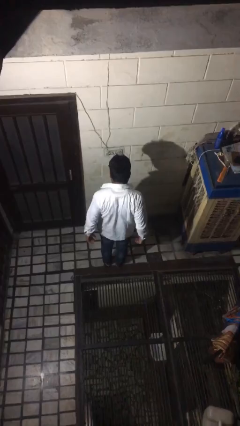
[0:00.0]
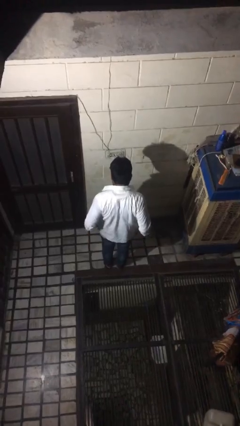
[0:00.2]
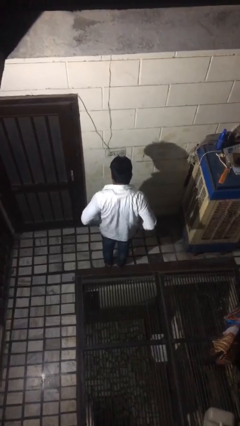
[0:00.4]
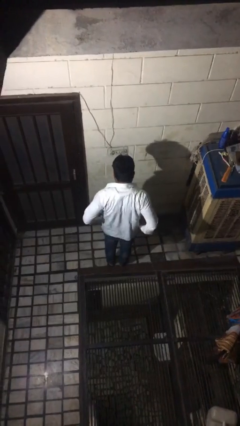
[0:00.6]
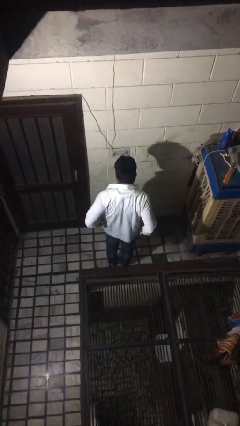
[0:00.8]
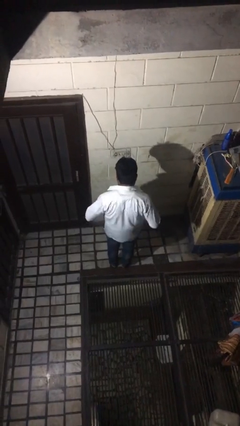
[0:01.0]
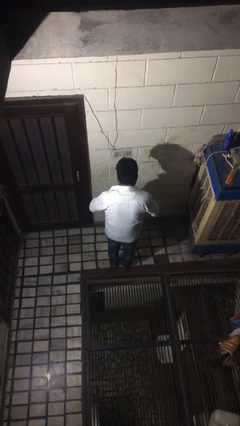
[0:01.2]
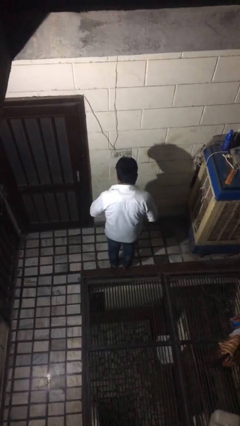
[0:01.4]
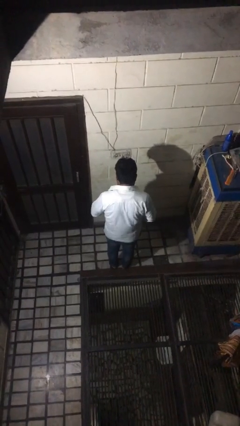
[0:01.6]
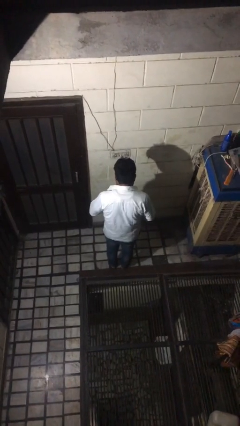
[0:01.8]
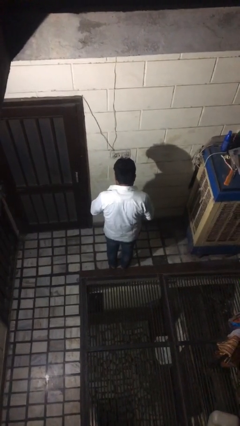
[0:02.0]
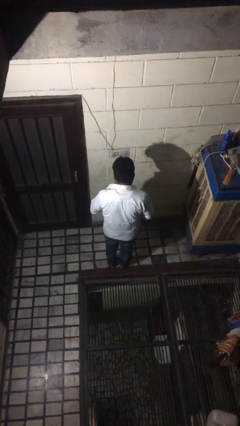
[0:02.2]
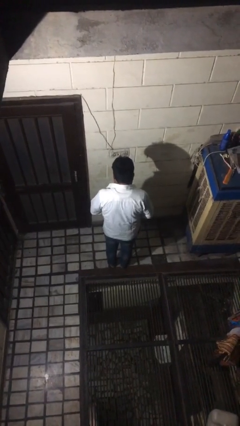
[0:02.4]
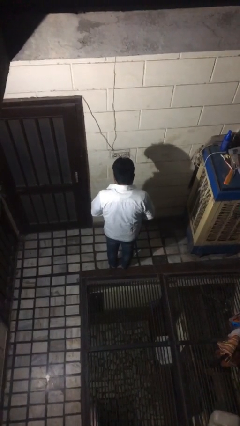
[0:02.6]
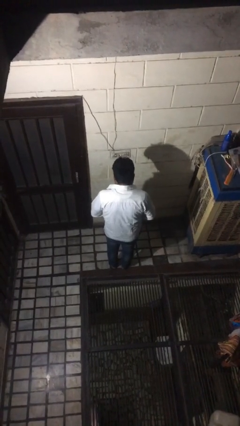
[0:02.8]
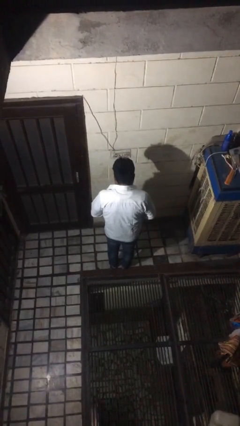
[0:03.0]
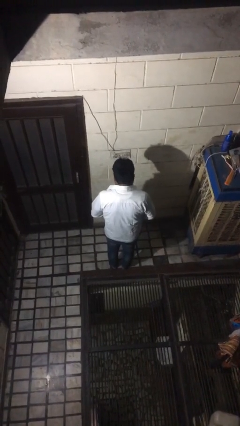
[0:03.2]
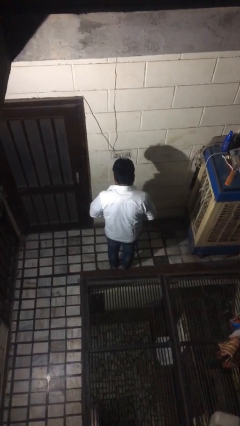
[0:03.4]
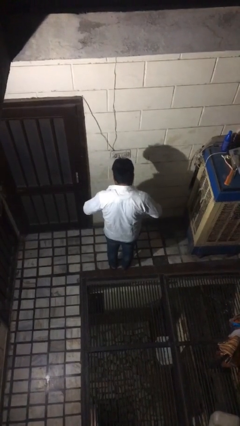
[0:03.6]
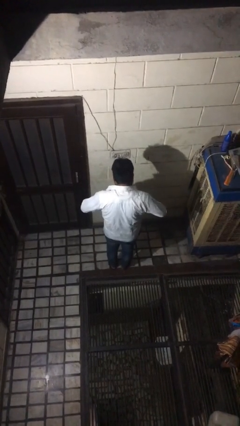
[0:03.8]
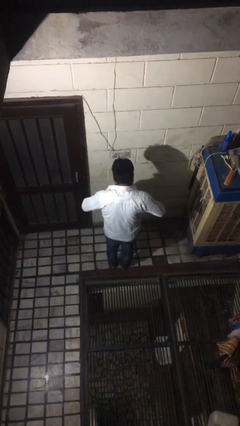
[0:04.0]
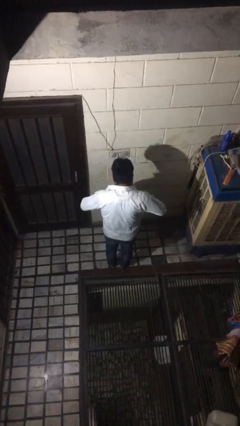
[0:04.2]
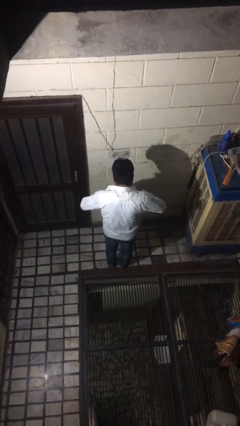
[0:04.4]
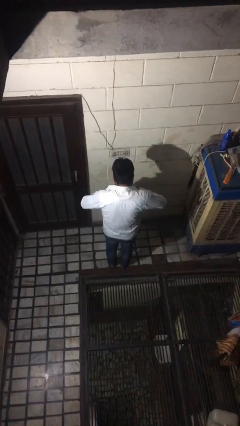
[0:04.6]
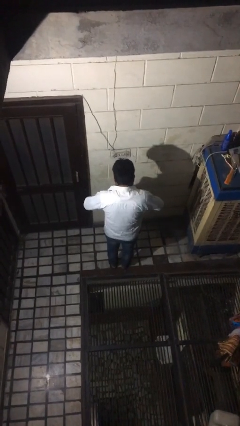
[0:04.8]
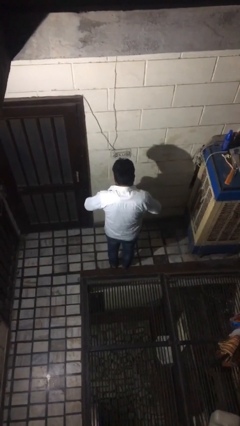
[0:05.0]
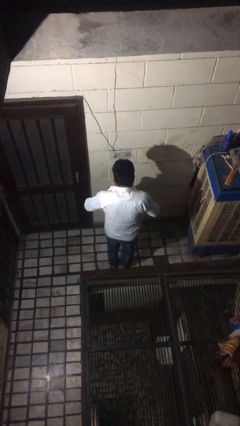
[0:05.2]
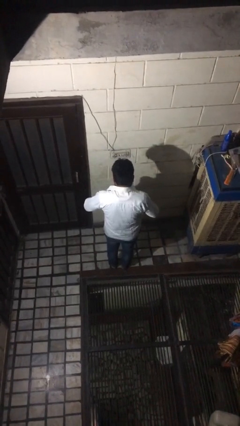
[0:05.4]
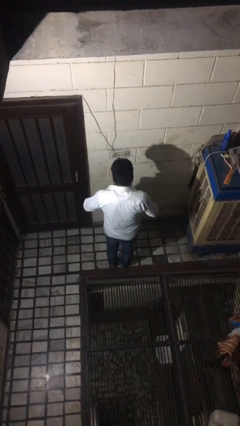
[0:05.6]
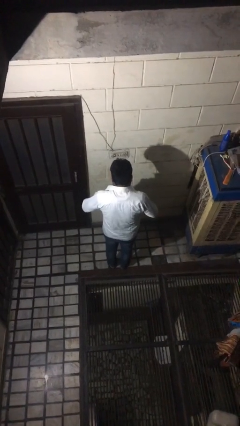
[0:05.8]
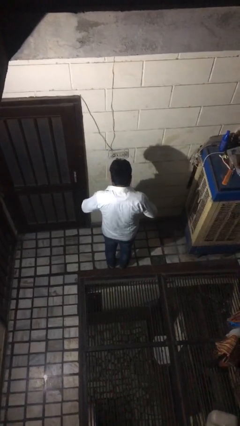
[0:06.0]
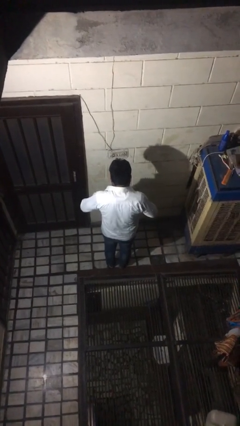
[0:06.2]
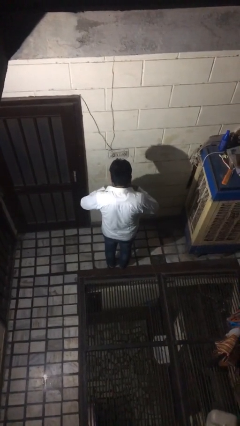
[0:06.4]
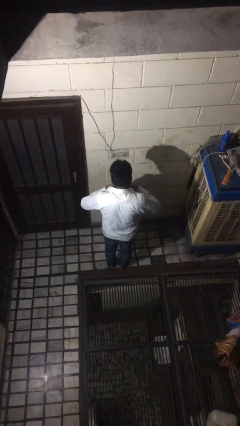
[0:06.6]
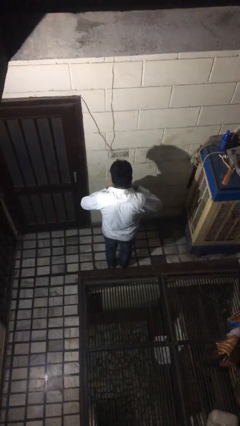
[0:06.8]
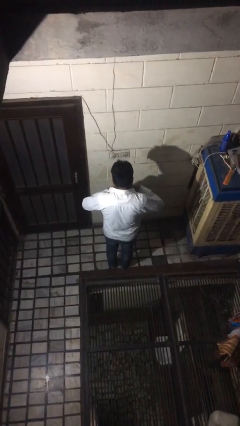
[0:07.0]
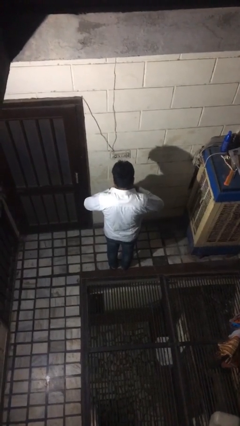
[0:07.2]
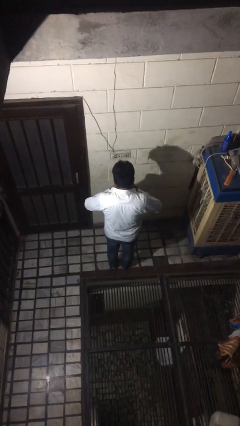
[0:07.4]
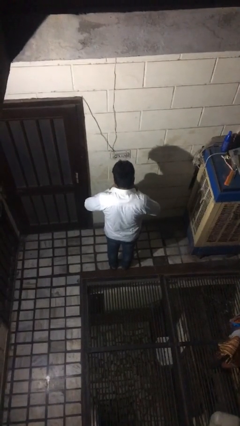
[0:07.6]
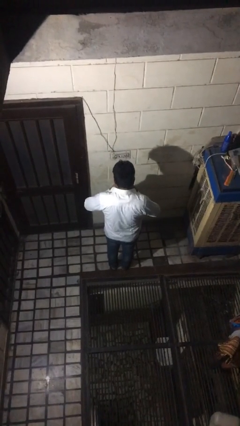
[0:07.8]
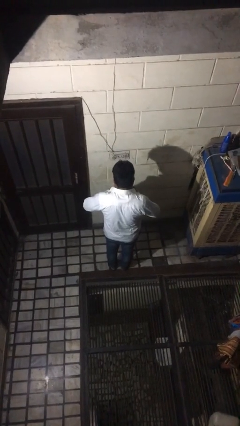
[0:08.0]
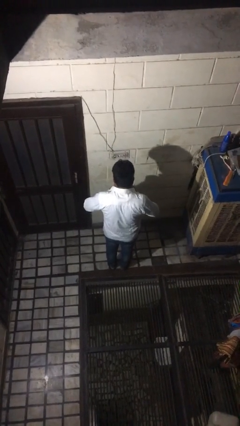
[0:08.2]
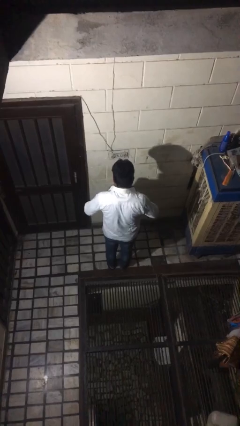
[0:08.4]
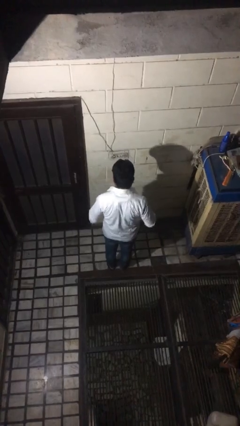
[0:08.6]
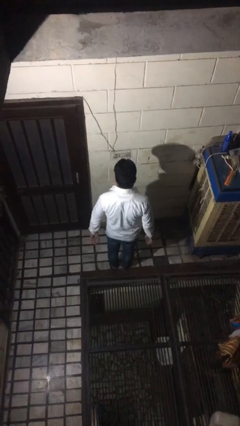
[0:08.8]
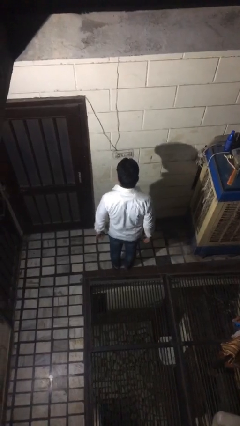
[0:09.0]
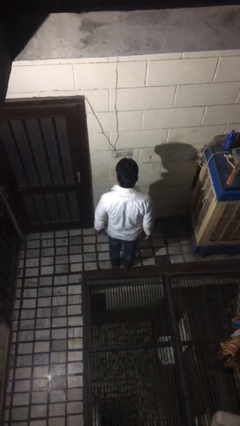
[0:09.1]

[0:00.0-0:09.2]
person buttons shirt

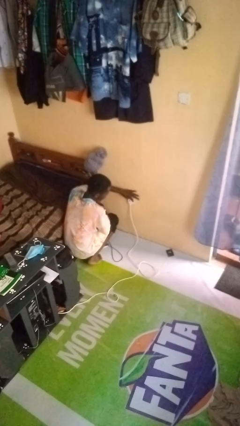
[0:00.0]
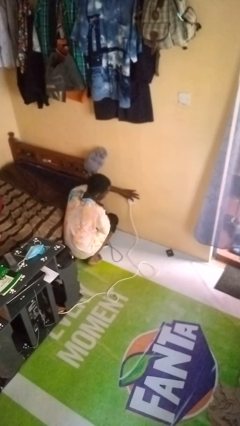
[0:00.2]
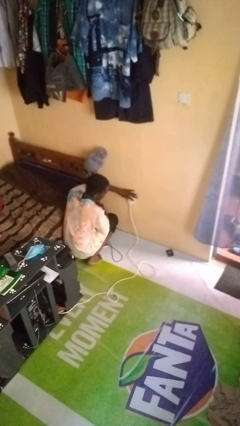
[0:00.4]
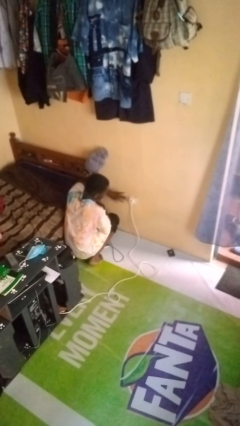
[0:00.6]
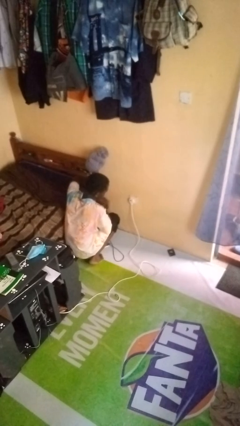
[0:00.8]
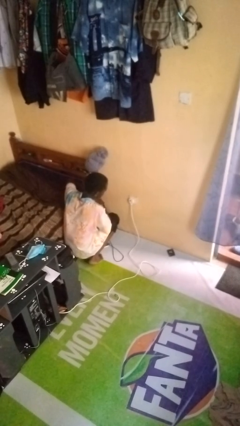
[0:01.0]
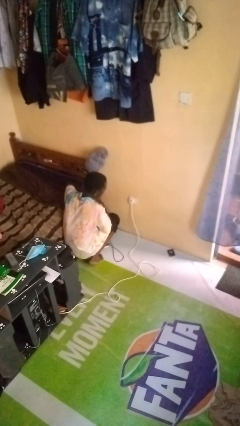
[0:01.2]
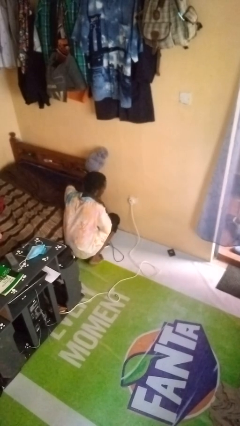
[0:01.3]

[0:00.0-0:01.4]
person plugs into electrical socket

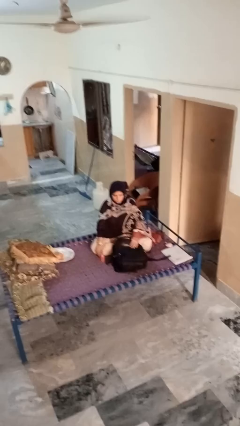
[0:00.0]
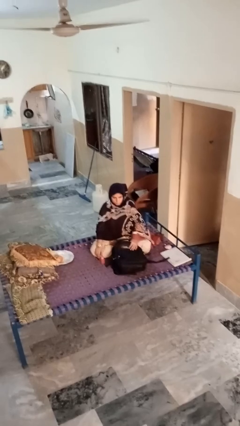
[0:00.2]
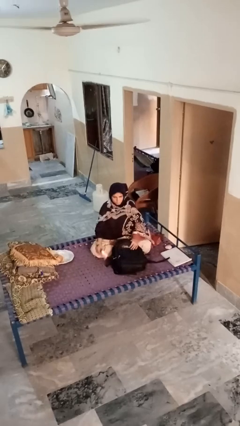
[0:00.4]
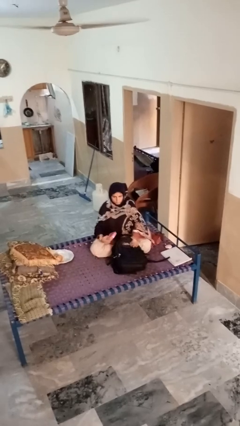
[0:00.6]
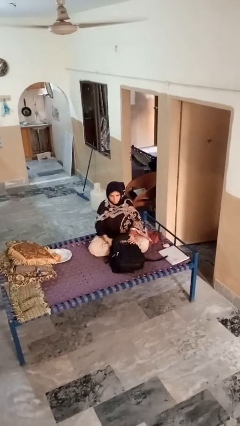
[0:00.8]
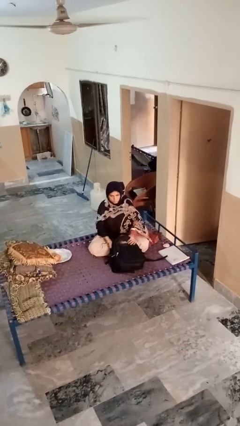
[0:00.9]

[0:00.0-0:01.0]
person puts object into bag

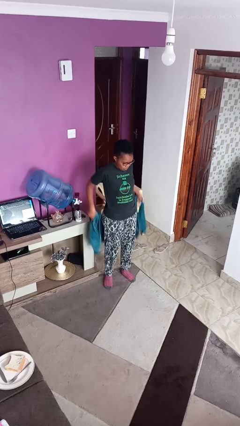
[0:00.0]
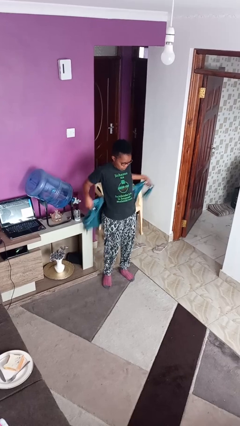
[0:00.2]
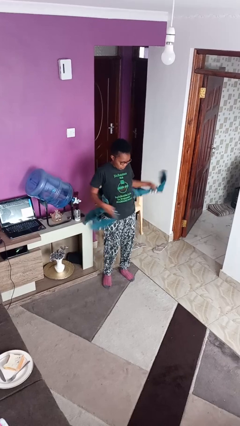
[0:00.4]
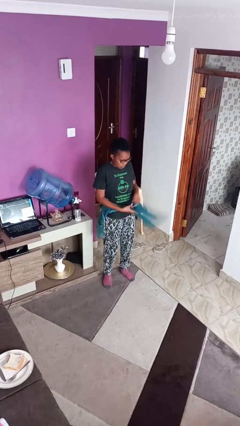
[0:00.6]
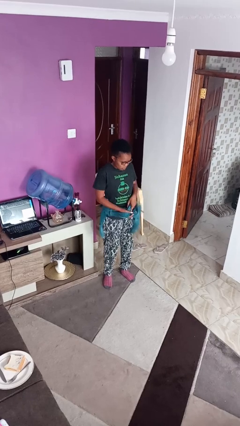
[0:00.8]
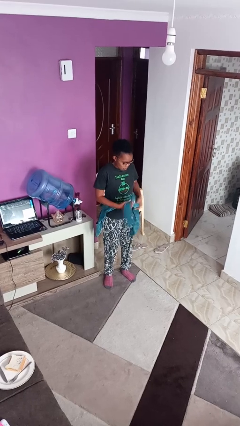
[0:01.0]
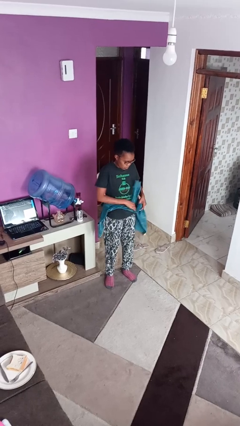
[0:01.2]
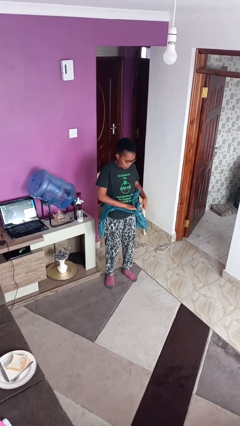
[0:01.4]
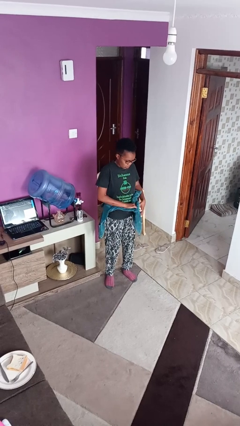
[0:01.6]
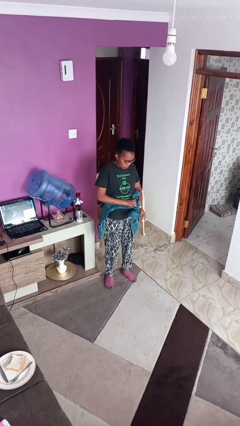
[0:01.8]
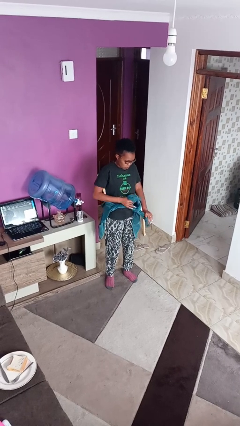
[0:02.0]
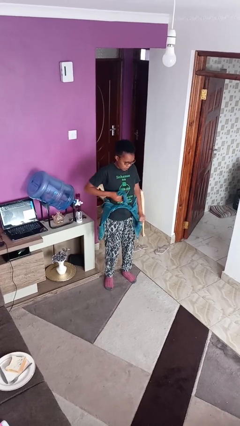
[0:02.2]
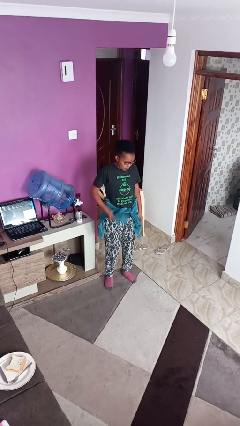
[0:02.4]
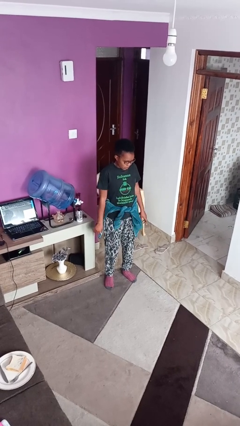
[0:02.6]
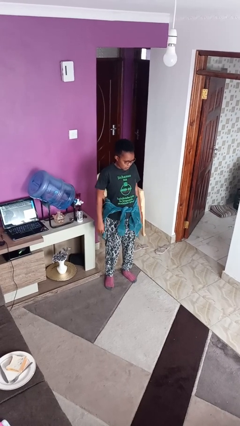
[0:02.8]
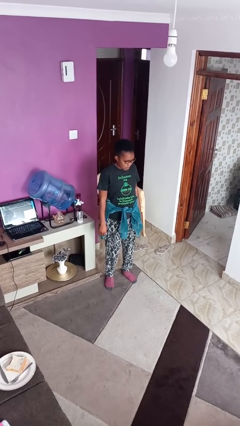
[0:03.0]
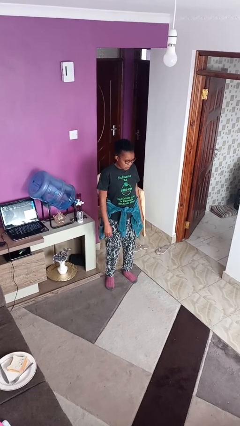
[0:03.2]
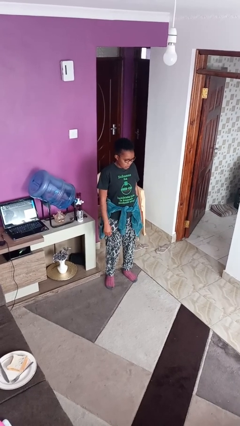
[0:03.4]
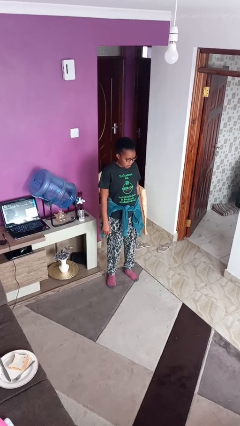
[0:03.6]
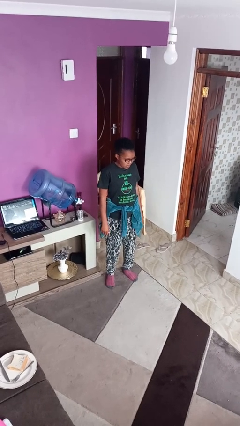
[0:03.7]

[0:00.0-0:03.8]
person ties jacket around waist

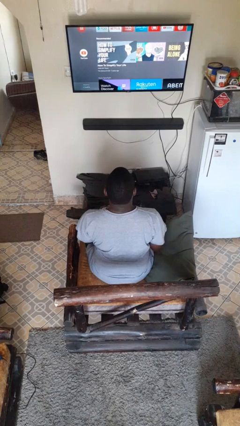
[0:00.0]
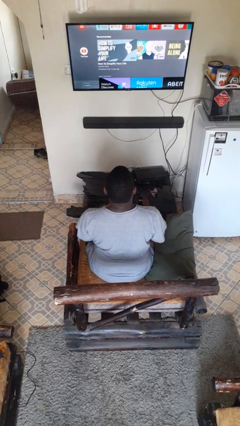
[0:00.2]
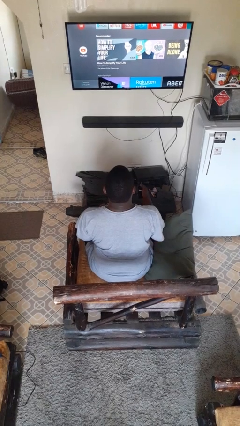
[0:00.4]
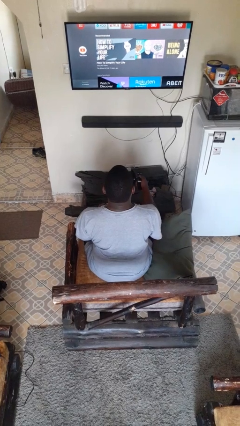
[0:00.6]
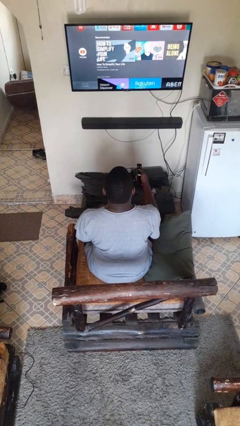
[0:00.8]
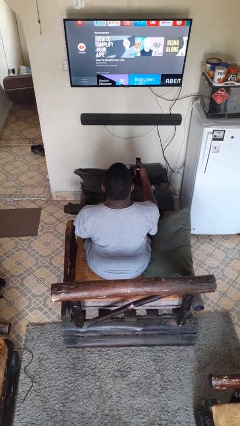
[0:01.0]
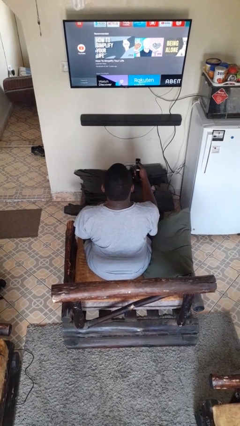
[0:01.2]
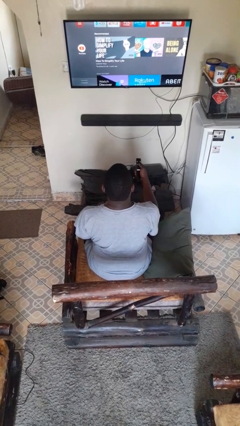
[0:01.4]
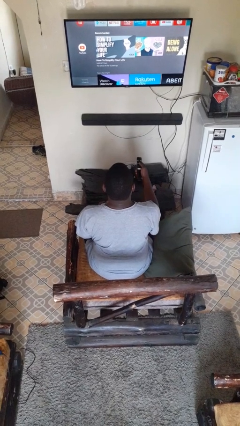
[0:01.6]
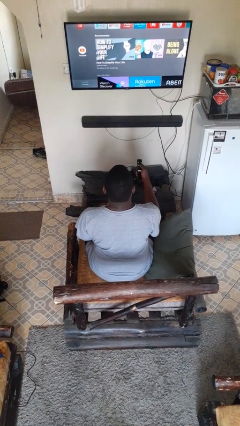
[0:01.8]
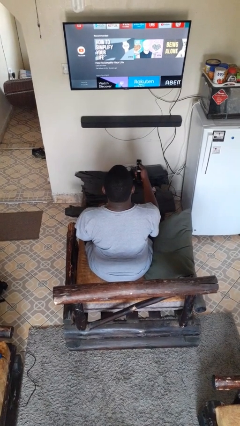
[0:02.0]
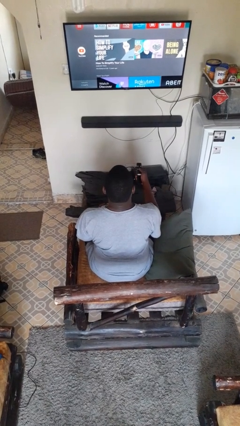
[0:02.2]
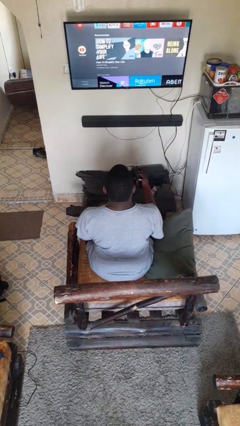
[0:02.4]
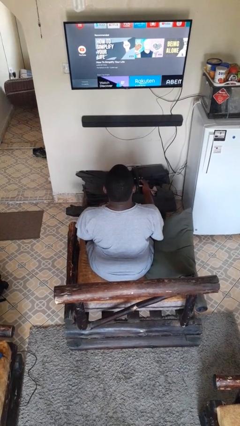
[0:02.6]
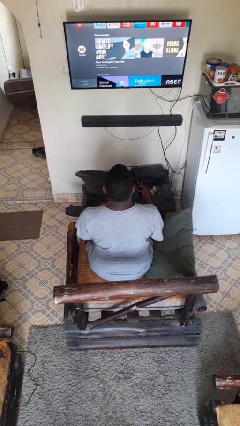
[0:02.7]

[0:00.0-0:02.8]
person uses television remote
